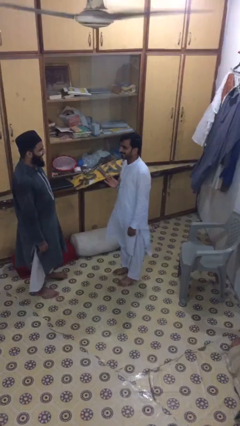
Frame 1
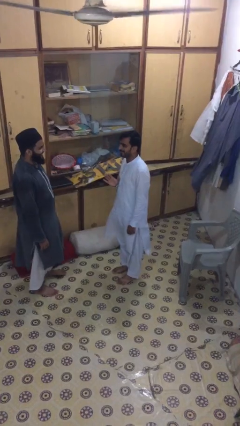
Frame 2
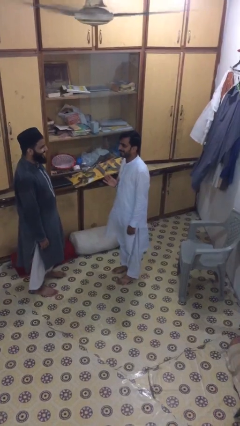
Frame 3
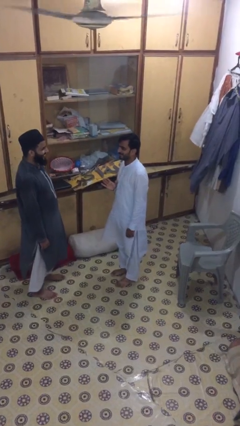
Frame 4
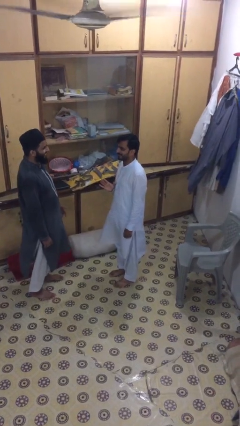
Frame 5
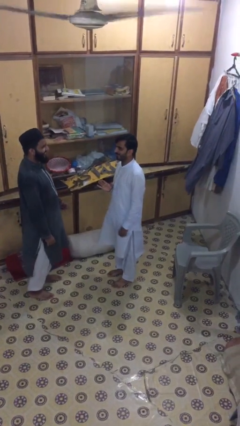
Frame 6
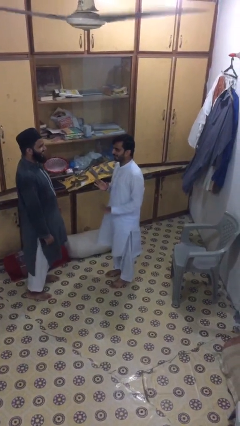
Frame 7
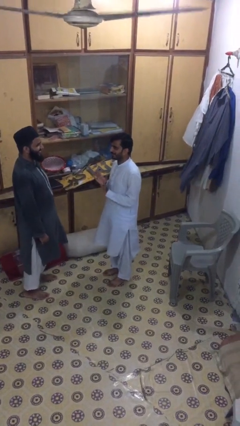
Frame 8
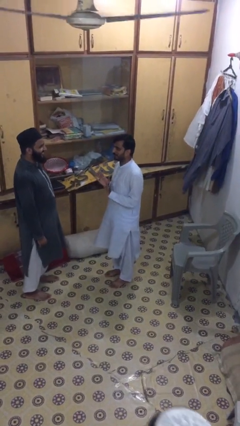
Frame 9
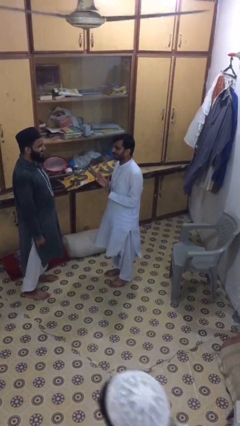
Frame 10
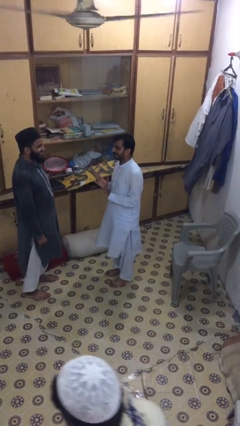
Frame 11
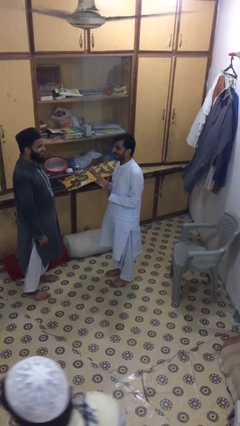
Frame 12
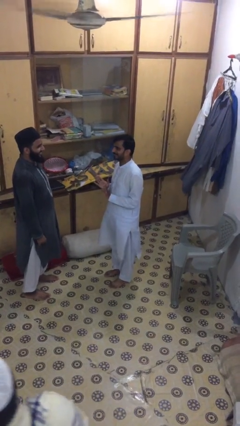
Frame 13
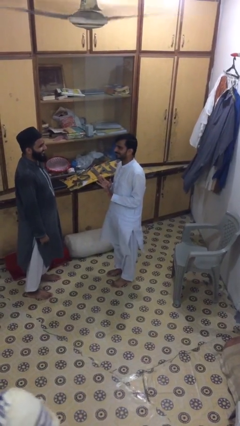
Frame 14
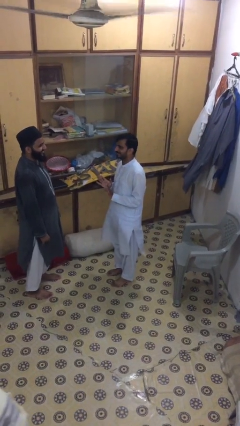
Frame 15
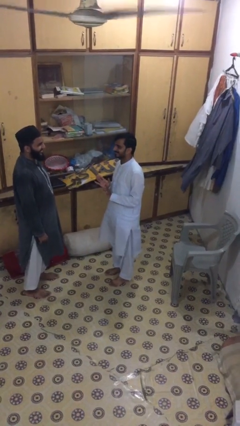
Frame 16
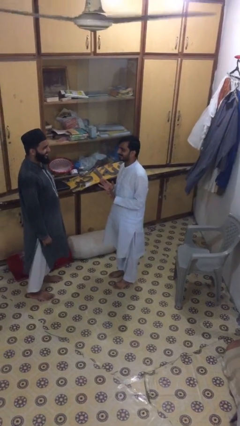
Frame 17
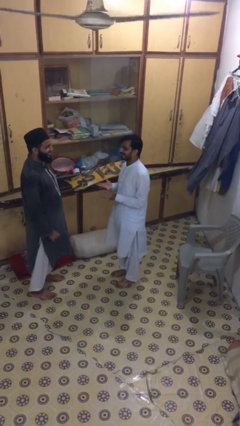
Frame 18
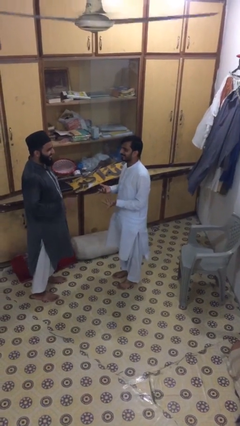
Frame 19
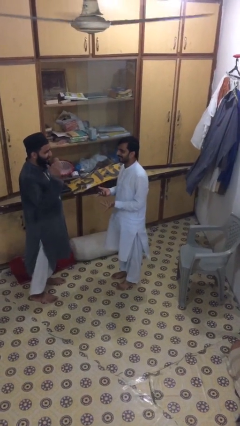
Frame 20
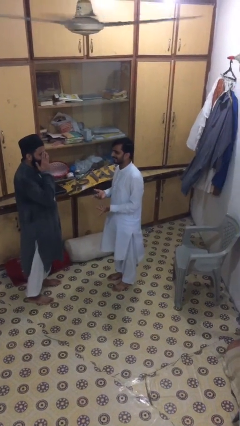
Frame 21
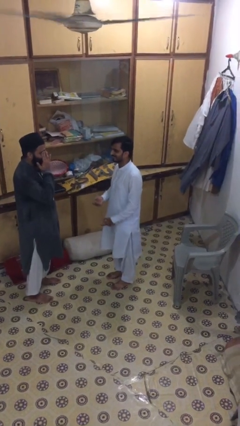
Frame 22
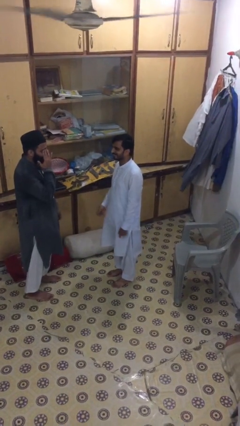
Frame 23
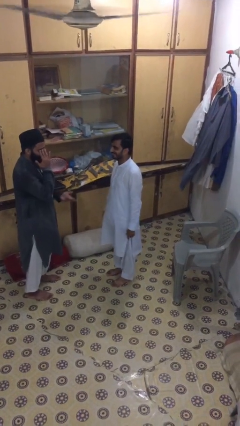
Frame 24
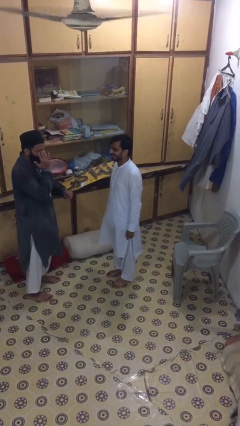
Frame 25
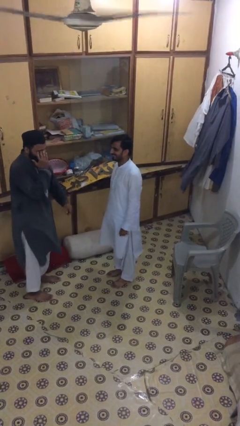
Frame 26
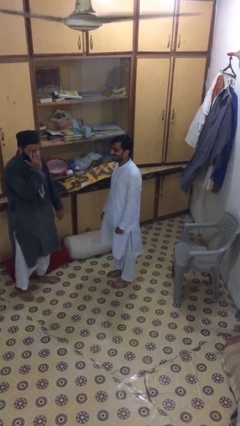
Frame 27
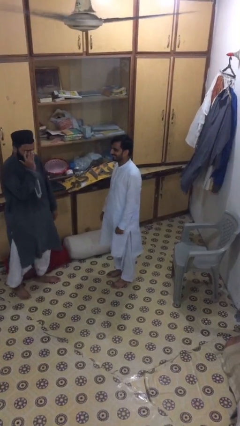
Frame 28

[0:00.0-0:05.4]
person talks to person

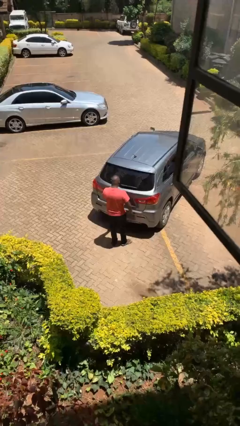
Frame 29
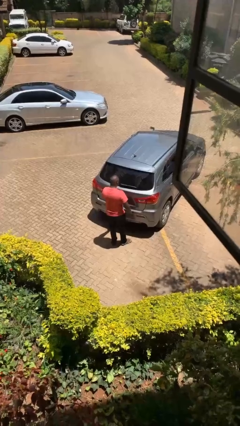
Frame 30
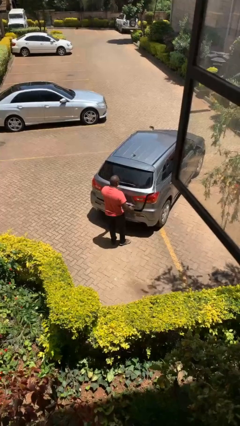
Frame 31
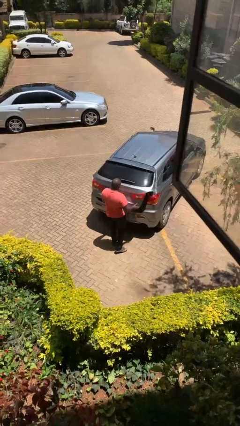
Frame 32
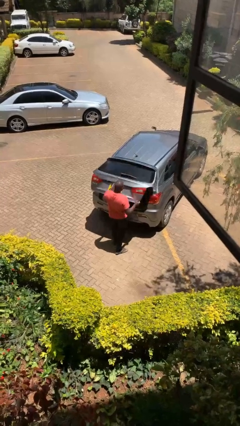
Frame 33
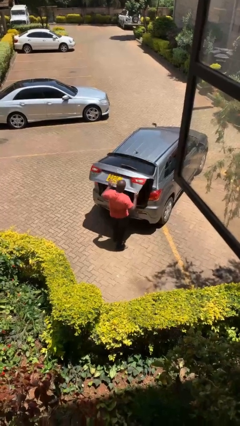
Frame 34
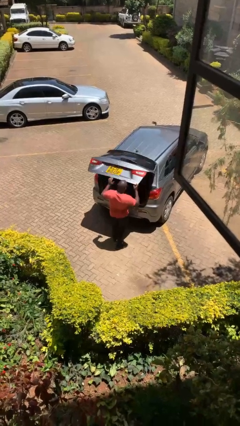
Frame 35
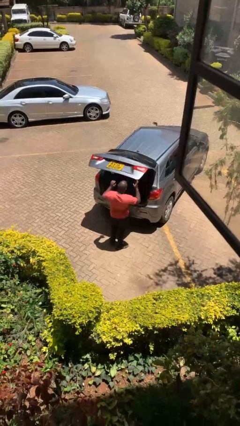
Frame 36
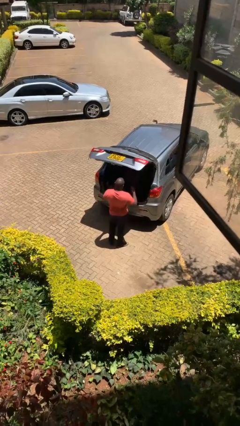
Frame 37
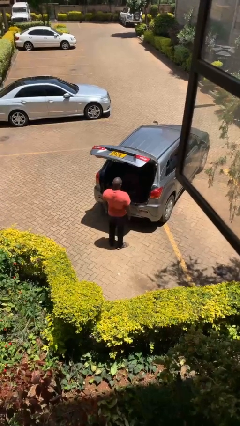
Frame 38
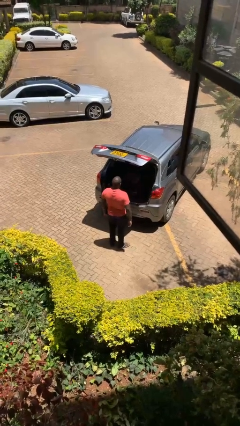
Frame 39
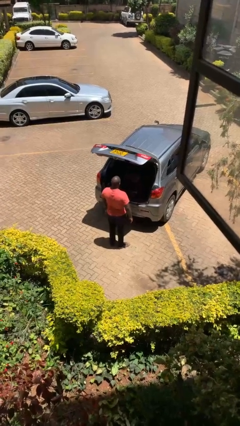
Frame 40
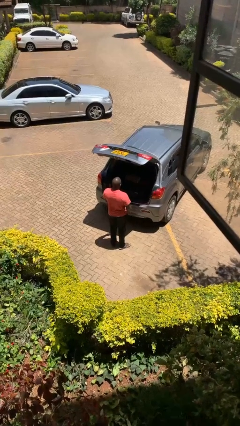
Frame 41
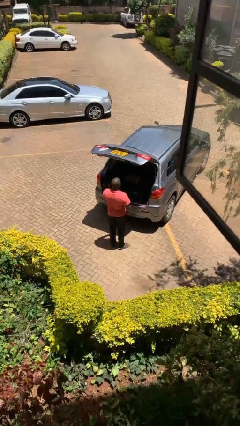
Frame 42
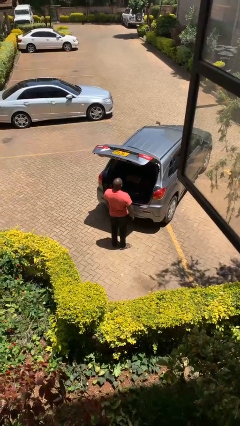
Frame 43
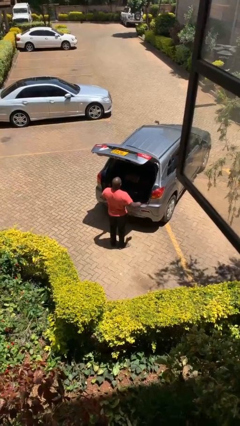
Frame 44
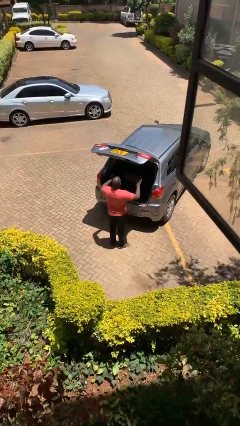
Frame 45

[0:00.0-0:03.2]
person opens car trunk

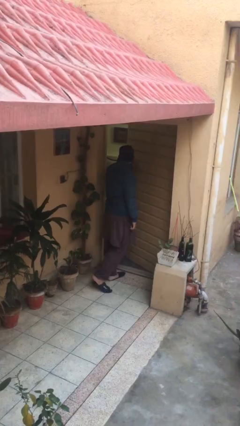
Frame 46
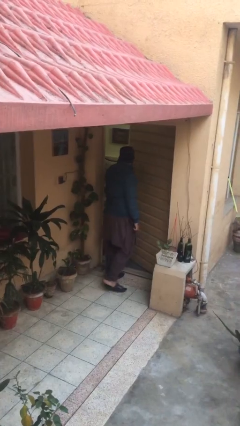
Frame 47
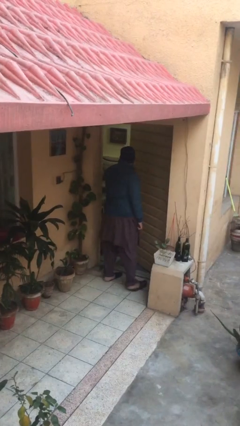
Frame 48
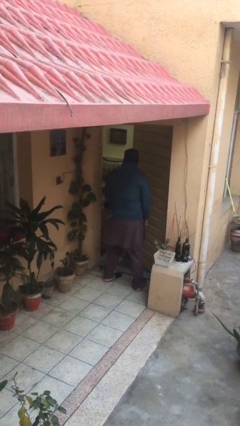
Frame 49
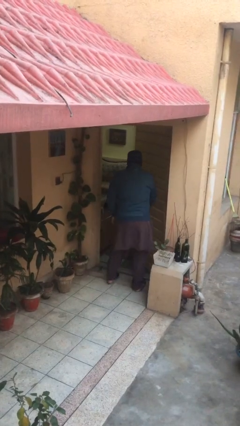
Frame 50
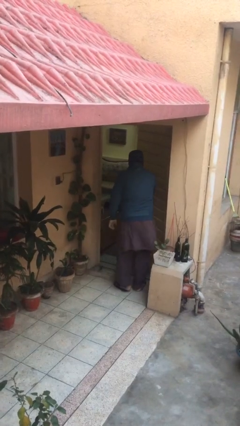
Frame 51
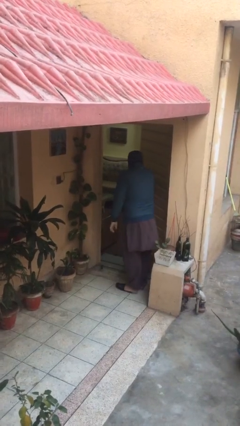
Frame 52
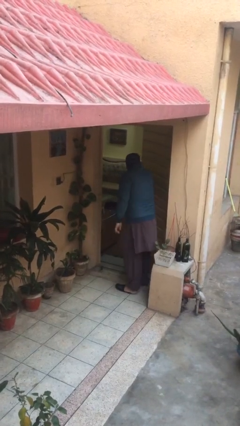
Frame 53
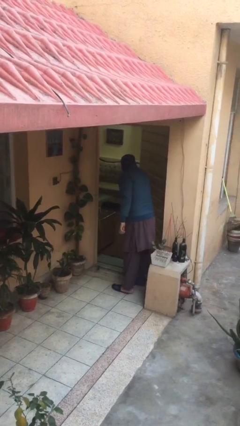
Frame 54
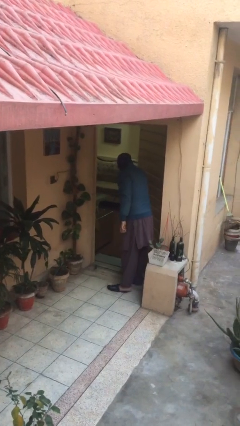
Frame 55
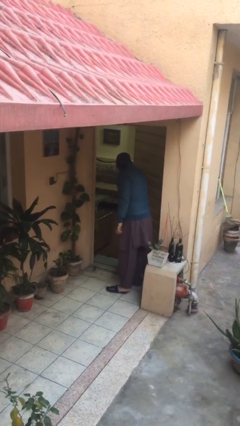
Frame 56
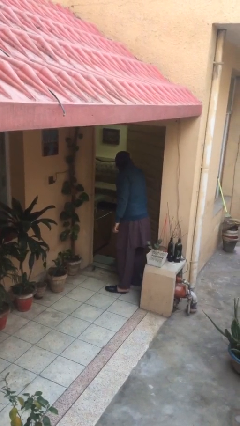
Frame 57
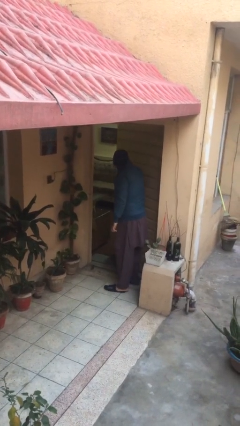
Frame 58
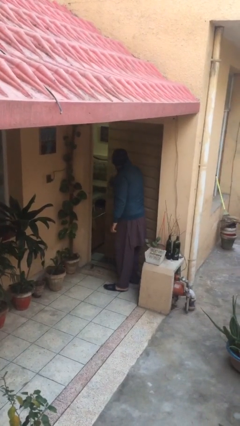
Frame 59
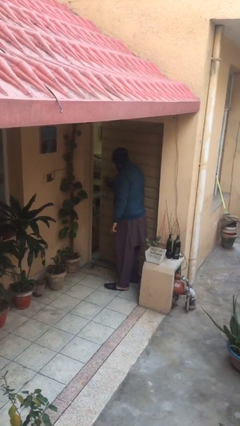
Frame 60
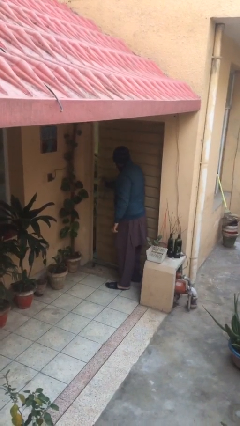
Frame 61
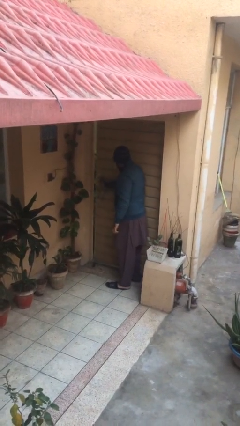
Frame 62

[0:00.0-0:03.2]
person closes facility door

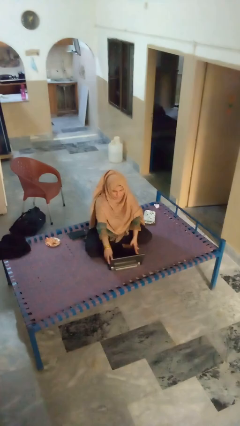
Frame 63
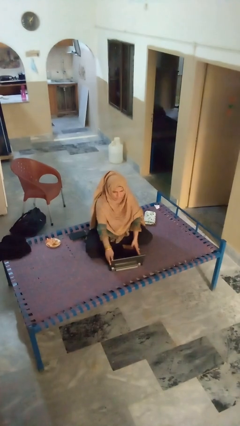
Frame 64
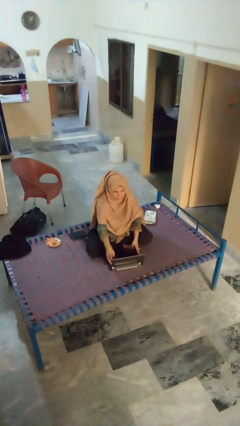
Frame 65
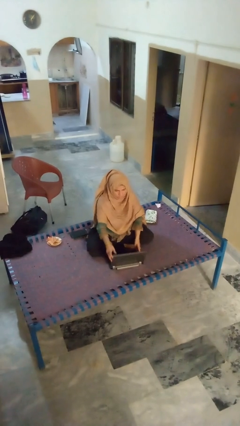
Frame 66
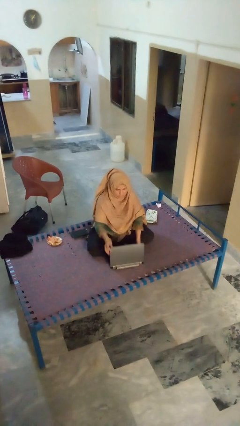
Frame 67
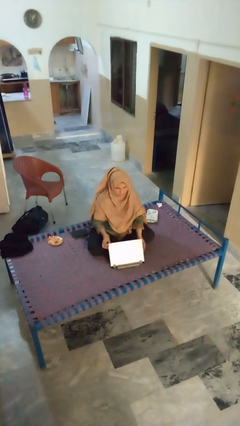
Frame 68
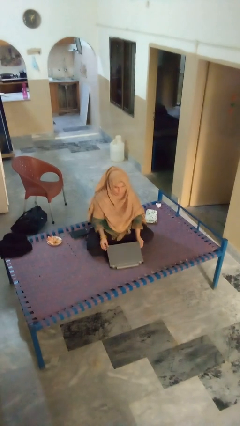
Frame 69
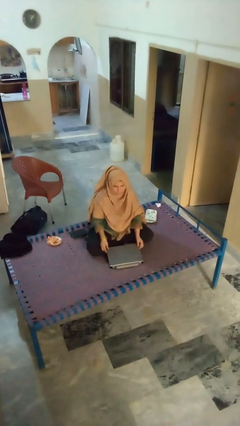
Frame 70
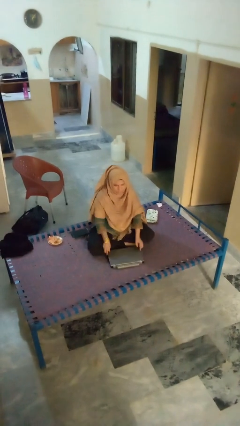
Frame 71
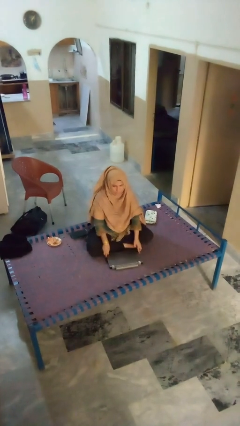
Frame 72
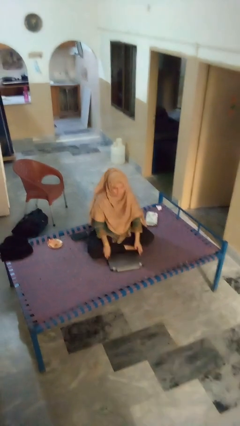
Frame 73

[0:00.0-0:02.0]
person closes laptop

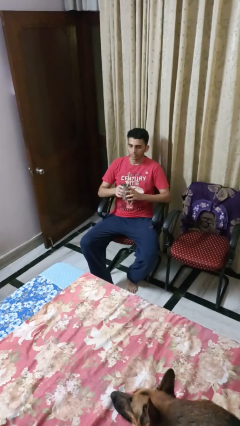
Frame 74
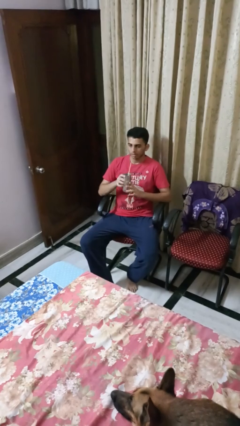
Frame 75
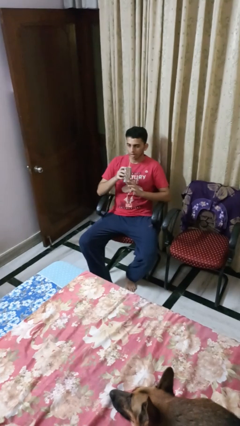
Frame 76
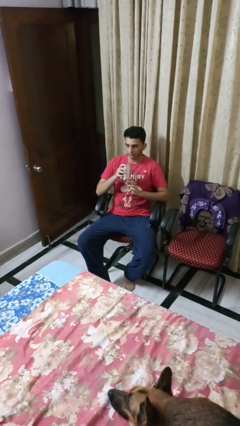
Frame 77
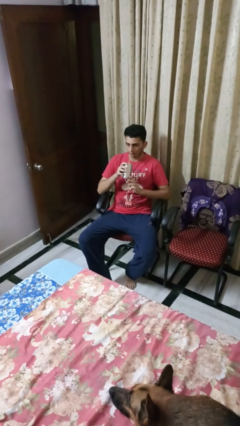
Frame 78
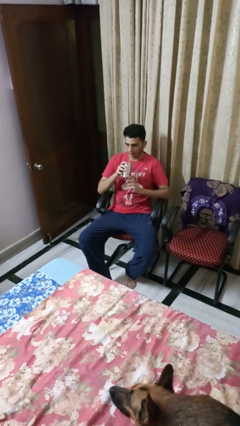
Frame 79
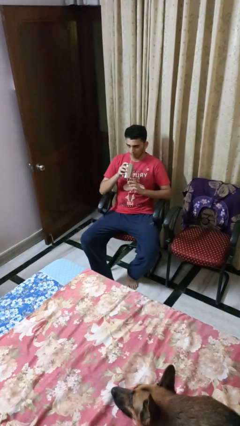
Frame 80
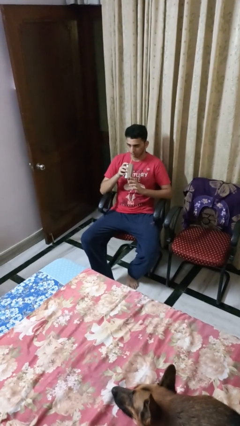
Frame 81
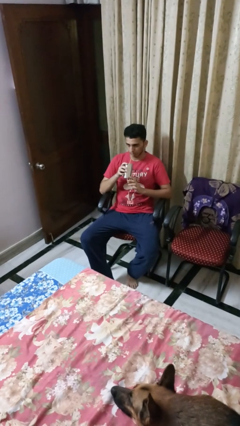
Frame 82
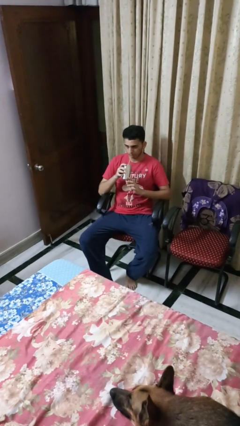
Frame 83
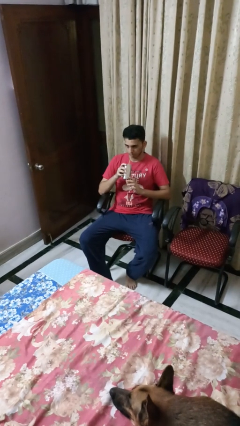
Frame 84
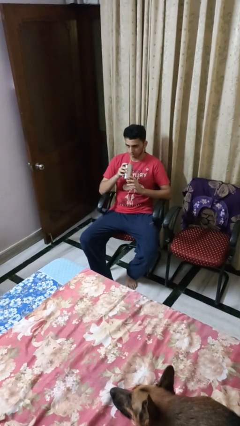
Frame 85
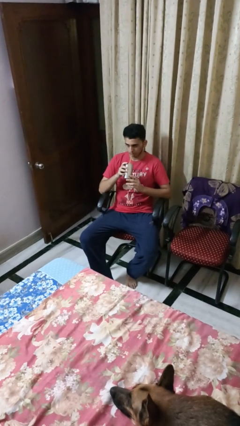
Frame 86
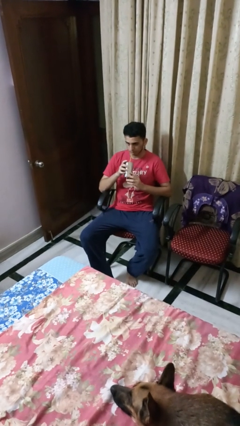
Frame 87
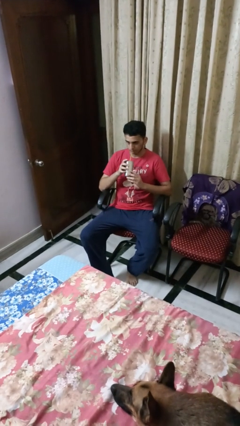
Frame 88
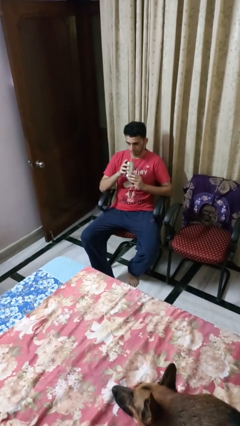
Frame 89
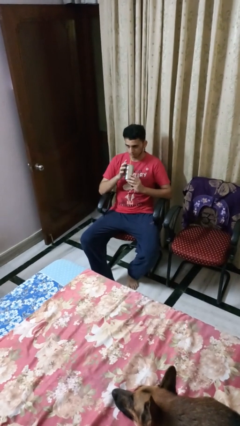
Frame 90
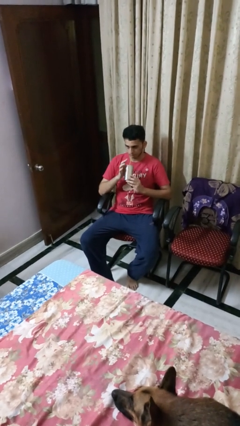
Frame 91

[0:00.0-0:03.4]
person drinks from straw

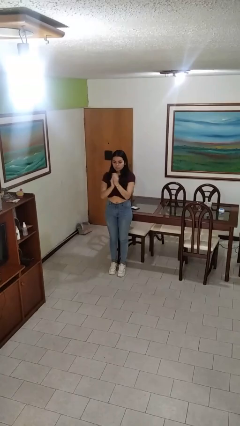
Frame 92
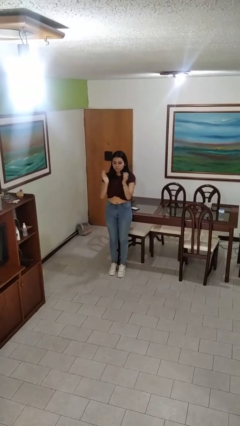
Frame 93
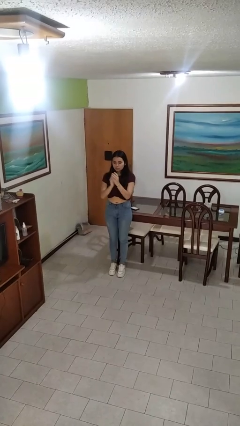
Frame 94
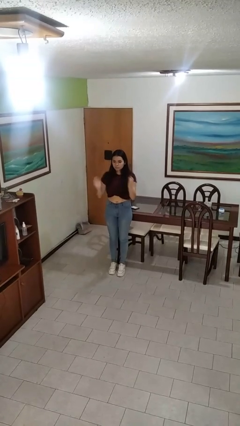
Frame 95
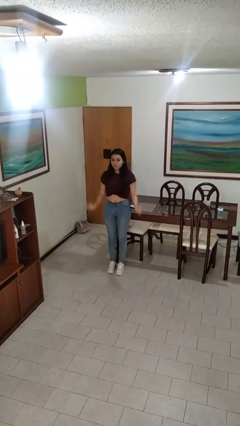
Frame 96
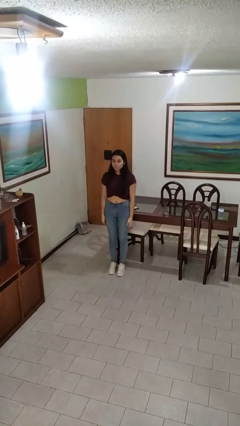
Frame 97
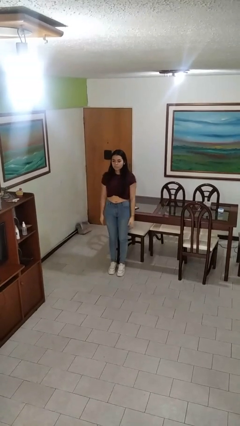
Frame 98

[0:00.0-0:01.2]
person claps hands
